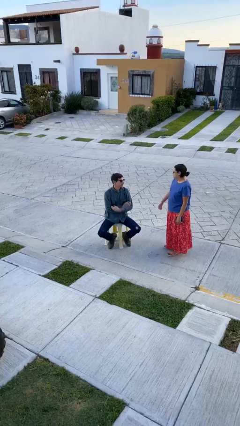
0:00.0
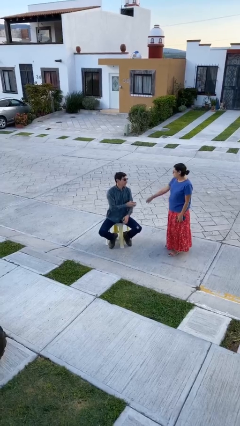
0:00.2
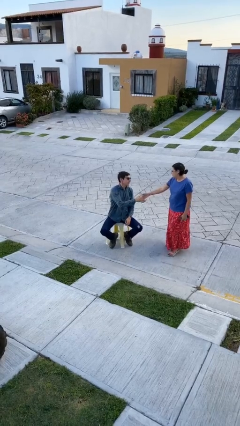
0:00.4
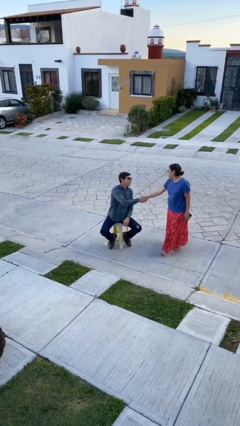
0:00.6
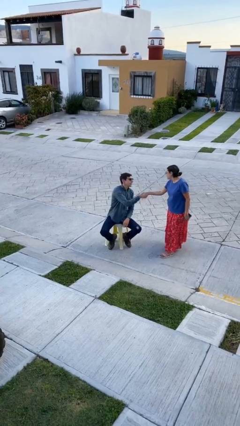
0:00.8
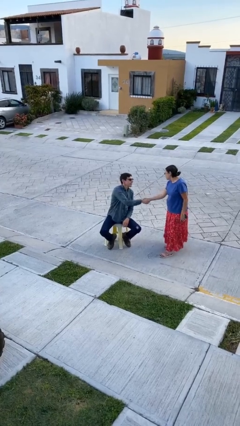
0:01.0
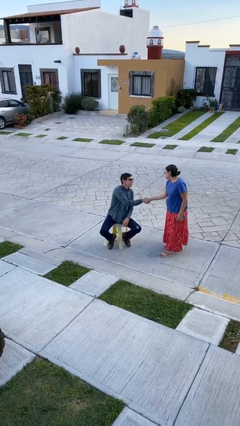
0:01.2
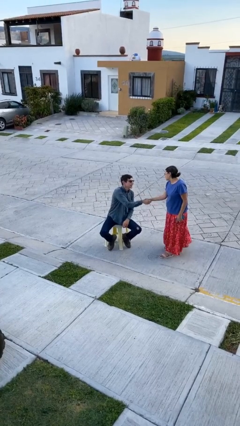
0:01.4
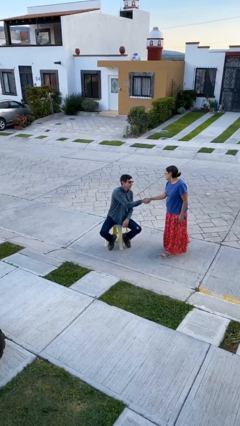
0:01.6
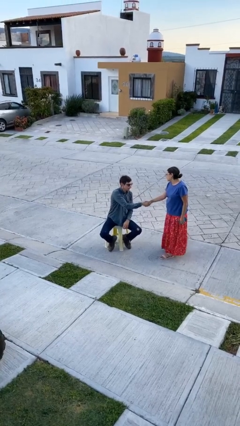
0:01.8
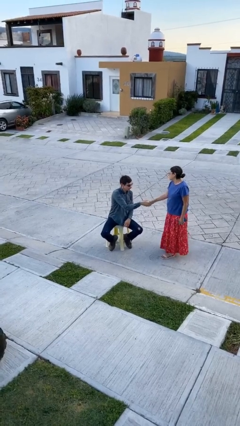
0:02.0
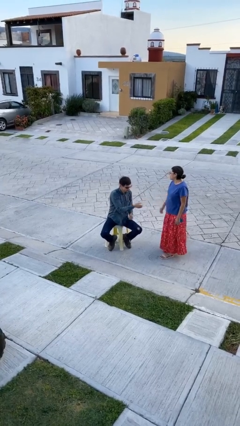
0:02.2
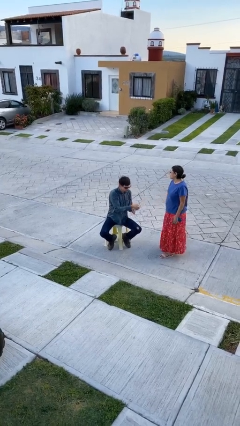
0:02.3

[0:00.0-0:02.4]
person shakes hand

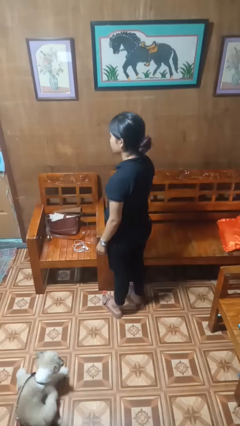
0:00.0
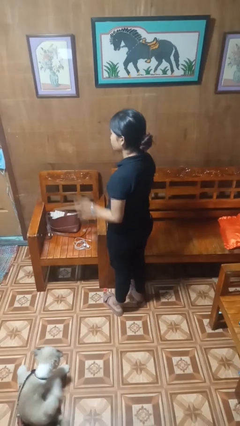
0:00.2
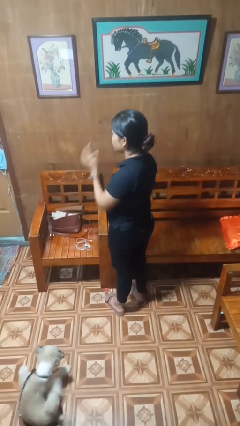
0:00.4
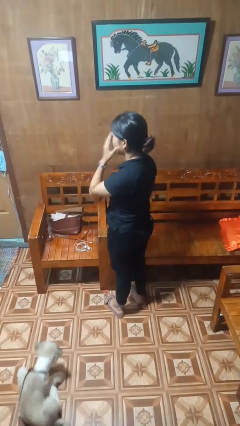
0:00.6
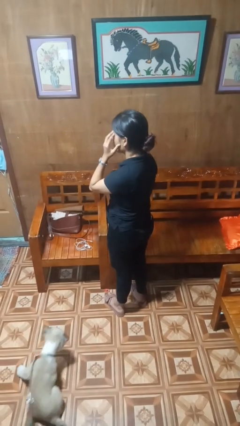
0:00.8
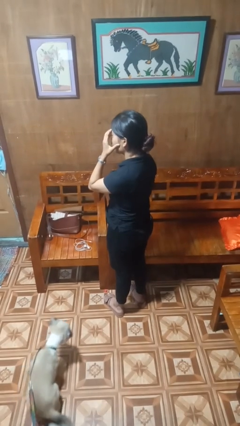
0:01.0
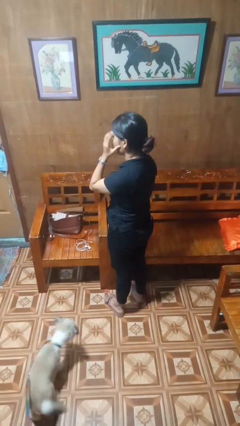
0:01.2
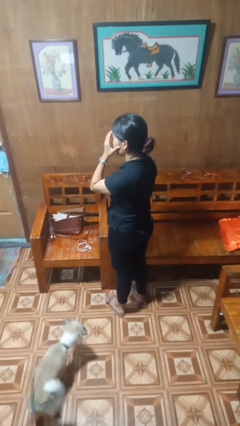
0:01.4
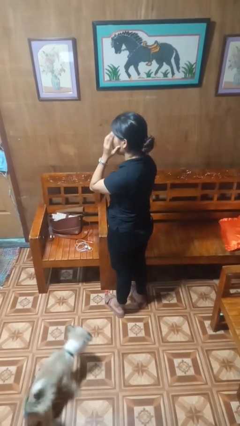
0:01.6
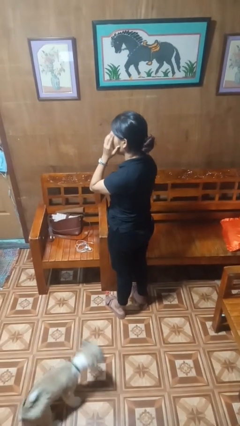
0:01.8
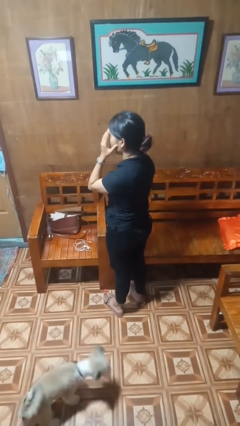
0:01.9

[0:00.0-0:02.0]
person scratches face

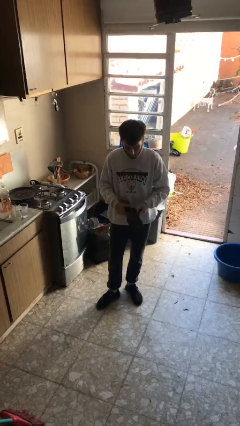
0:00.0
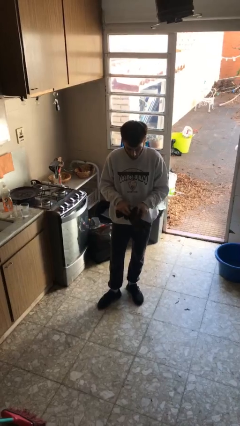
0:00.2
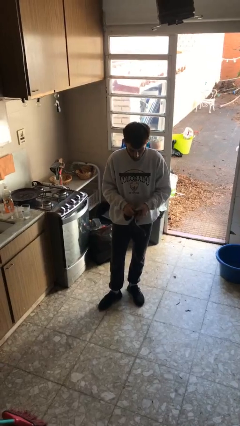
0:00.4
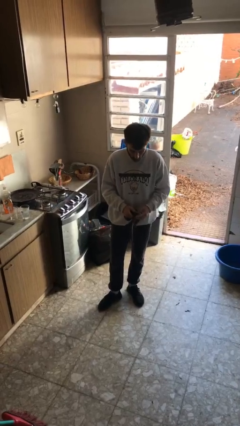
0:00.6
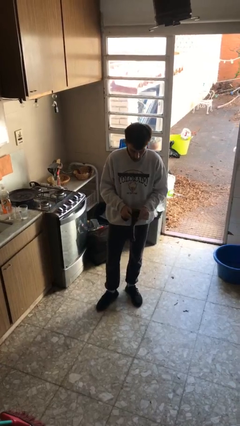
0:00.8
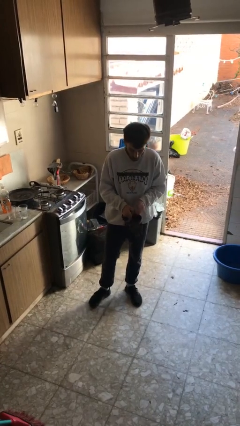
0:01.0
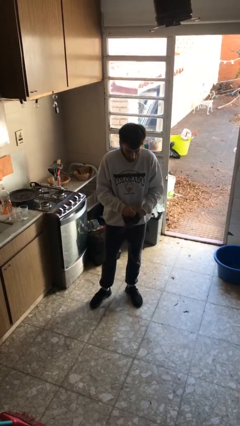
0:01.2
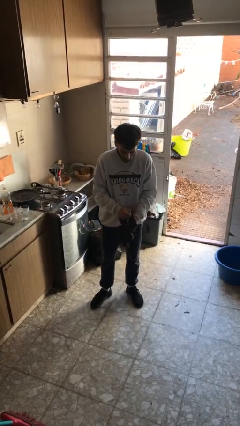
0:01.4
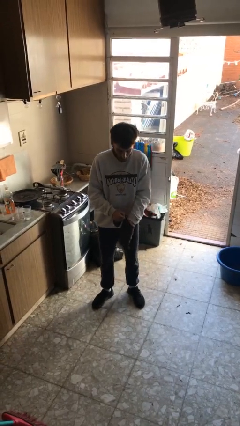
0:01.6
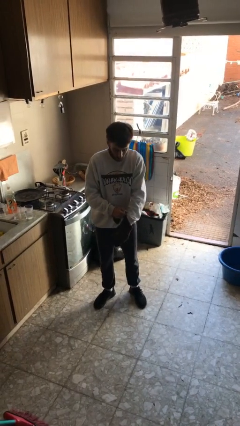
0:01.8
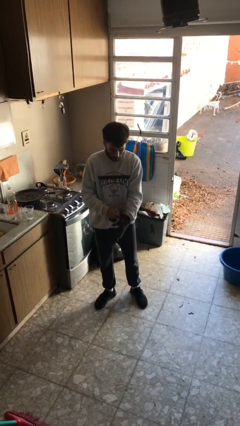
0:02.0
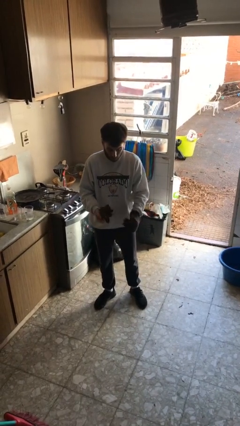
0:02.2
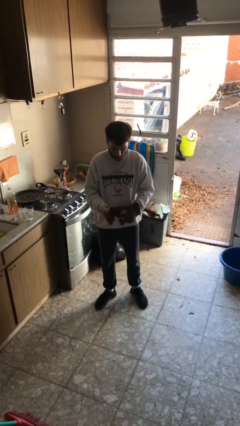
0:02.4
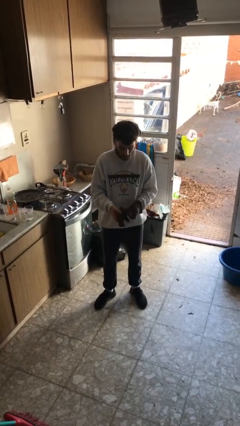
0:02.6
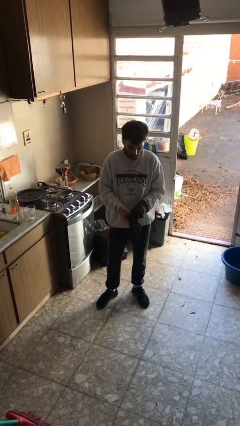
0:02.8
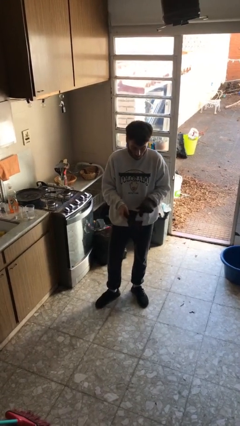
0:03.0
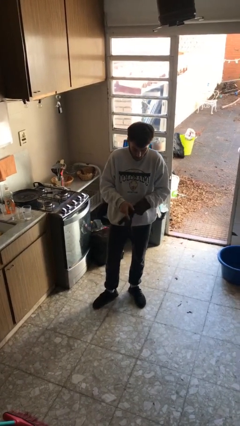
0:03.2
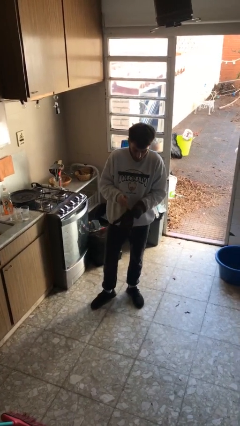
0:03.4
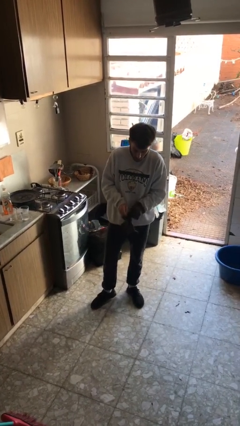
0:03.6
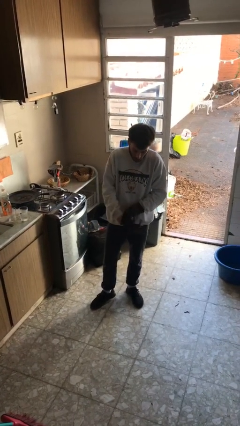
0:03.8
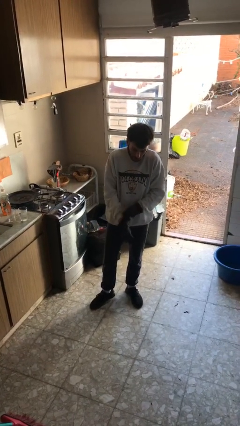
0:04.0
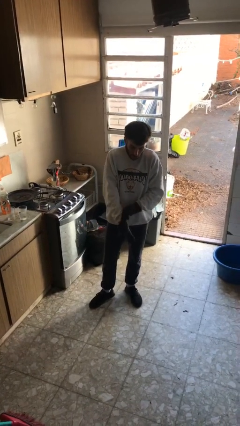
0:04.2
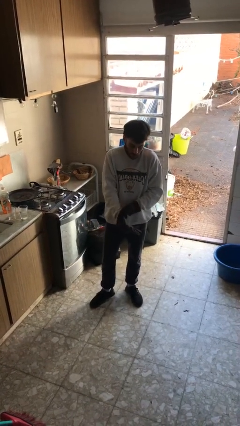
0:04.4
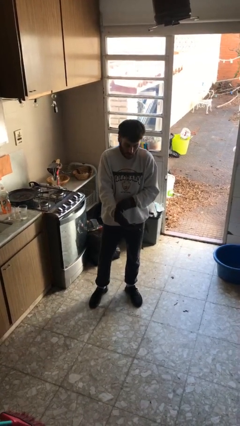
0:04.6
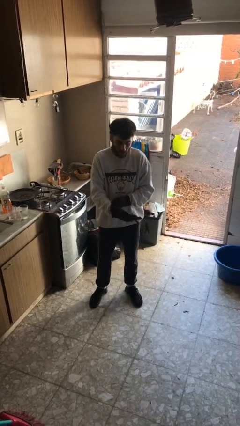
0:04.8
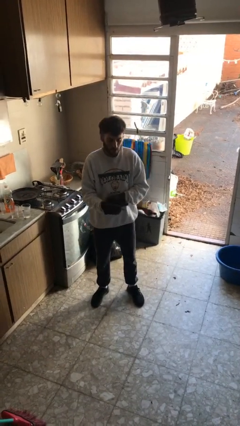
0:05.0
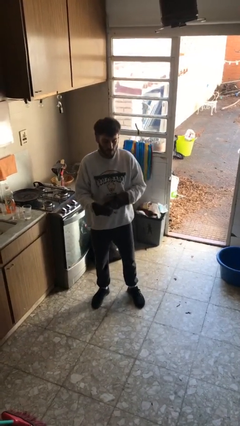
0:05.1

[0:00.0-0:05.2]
person puts on gloves

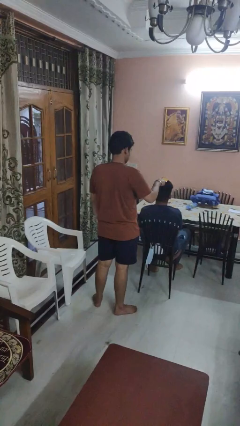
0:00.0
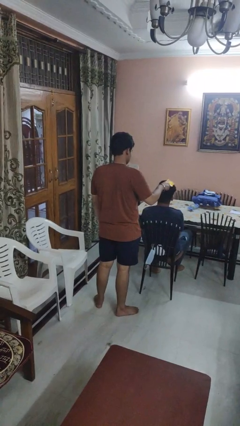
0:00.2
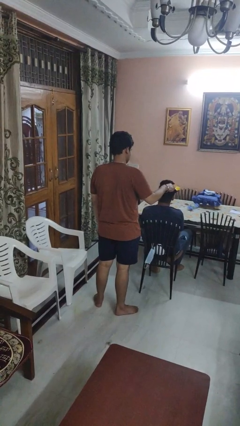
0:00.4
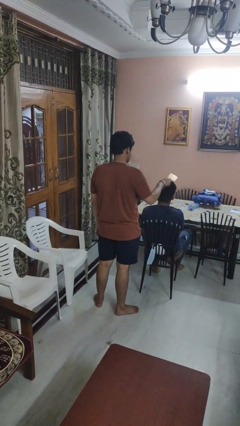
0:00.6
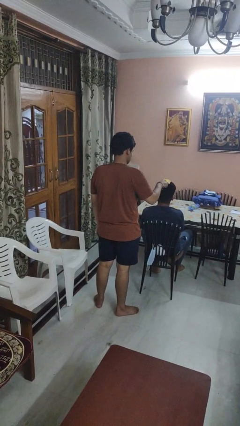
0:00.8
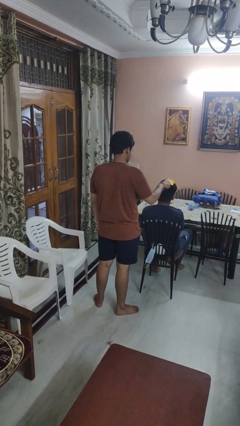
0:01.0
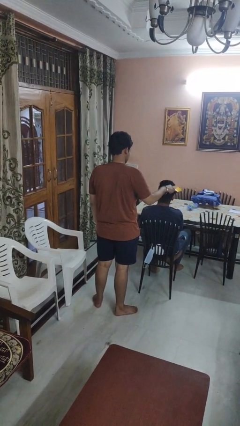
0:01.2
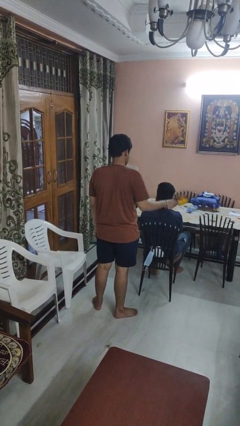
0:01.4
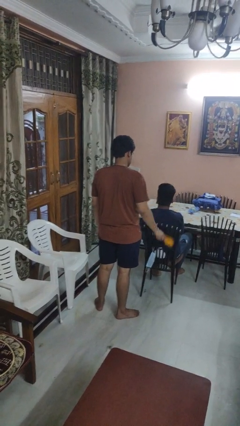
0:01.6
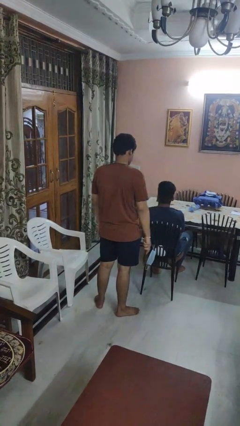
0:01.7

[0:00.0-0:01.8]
person brushes hair of person

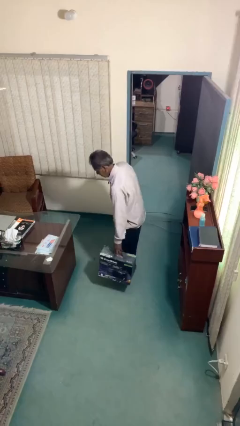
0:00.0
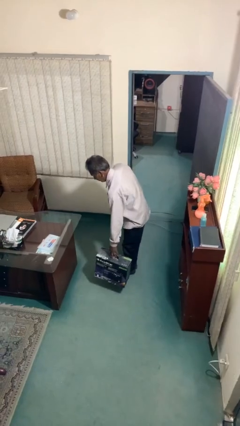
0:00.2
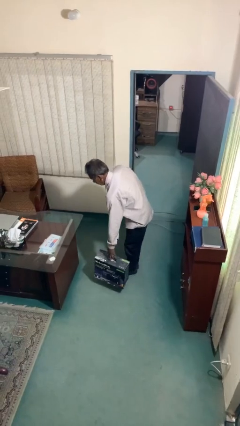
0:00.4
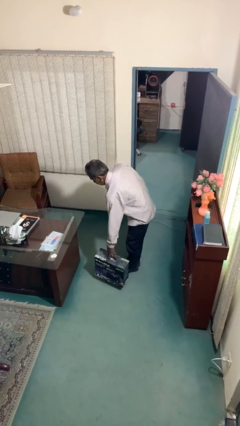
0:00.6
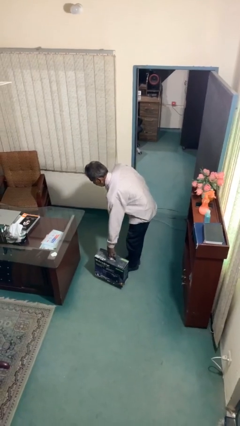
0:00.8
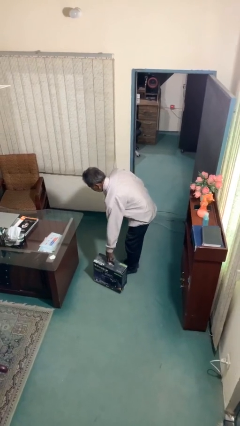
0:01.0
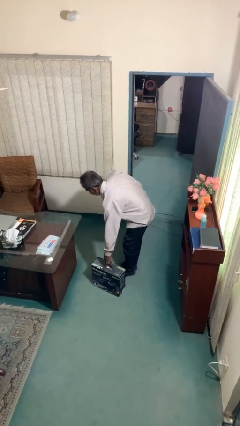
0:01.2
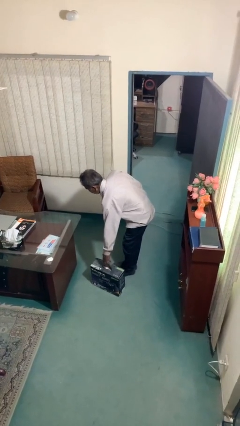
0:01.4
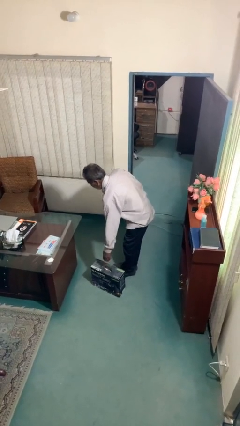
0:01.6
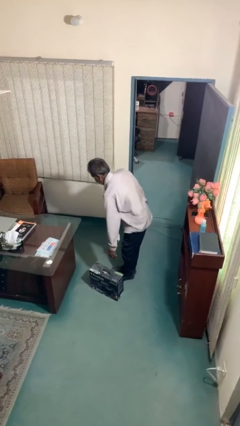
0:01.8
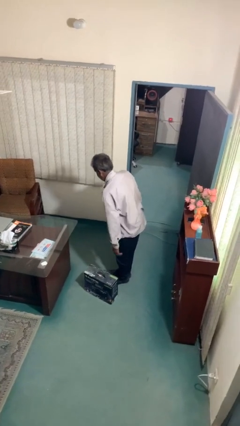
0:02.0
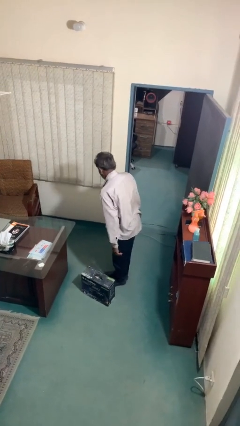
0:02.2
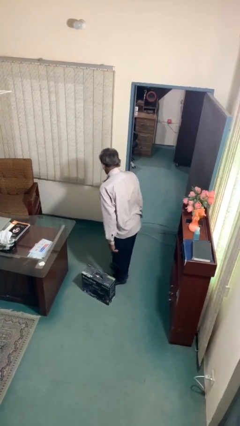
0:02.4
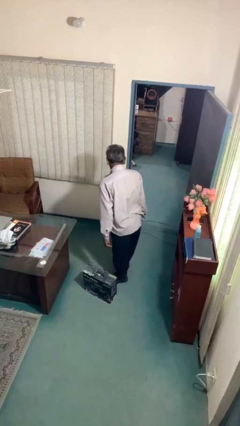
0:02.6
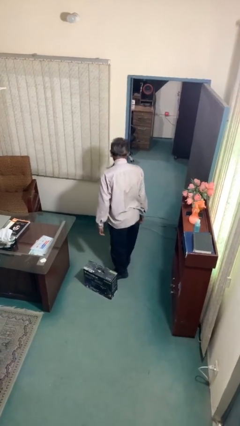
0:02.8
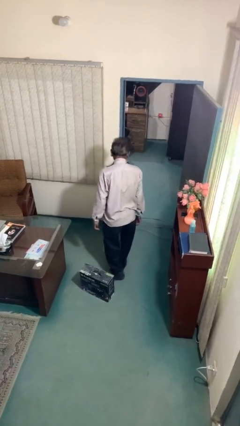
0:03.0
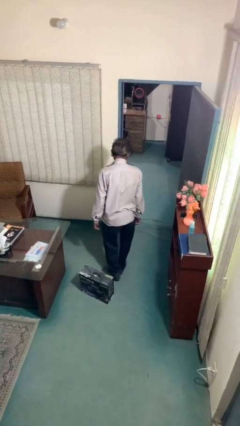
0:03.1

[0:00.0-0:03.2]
person puts down object on floor

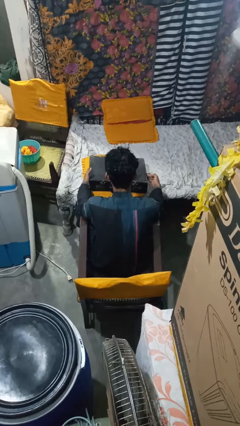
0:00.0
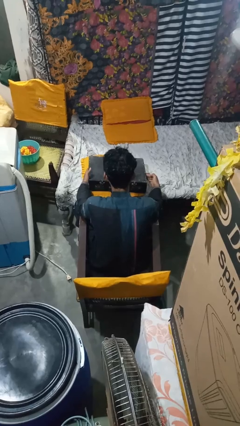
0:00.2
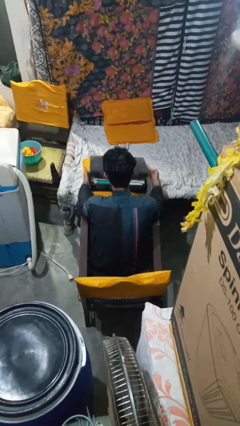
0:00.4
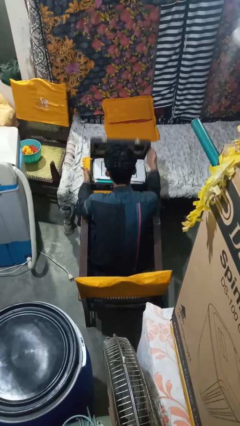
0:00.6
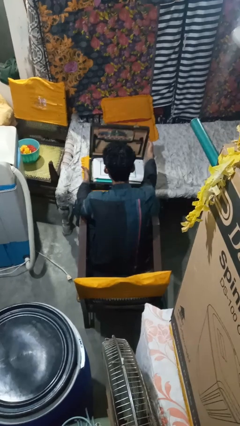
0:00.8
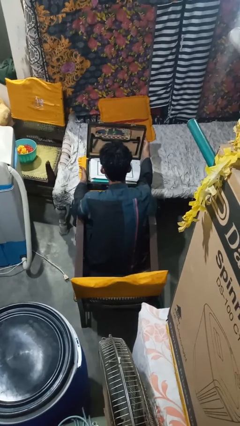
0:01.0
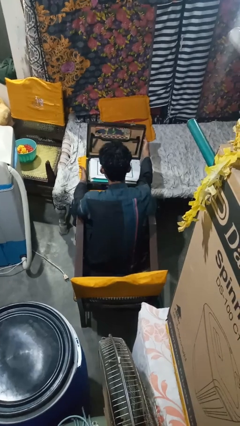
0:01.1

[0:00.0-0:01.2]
person opens suitcase

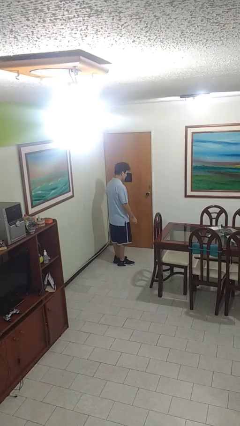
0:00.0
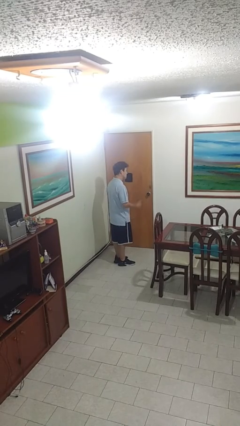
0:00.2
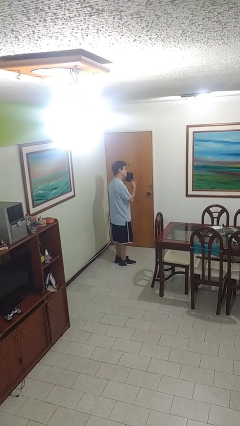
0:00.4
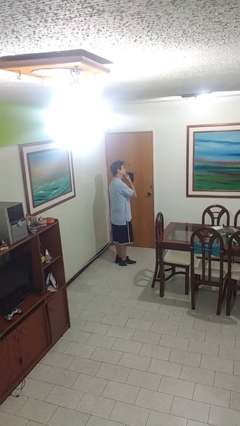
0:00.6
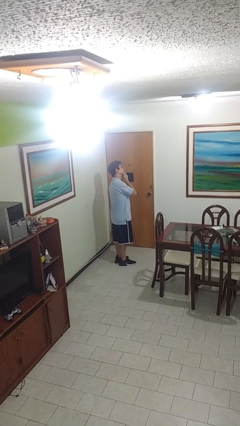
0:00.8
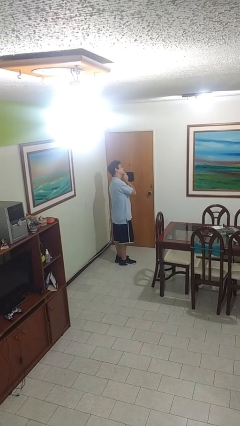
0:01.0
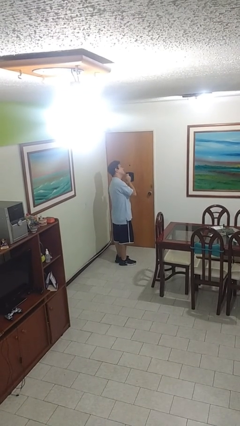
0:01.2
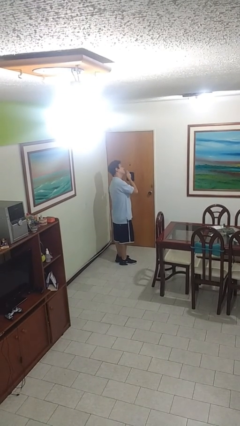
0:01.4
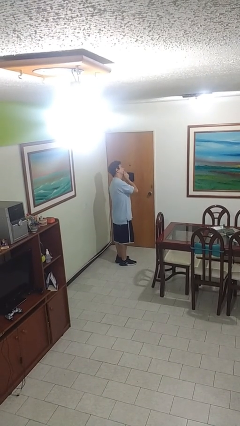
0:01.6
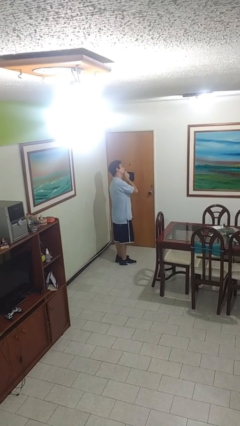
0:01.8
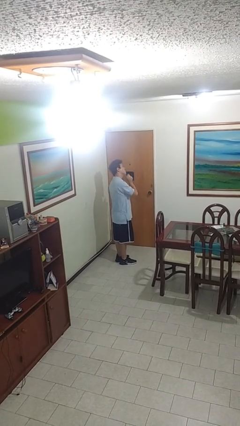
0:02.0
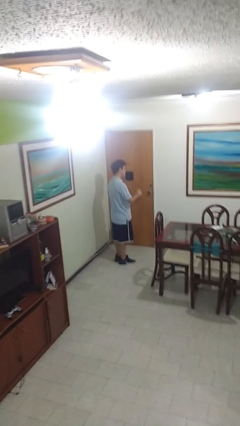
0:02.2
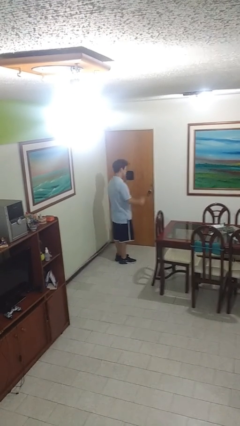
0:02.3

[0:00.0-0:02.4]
person strokes chin
